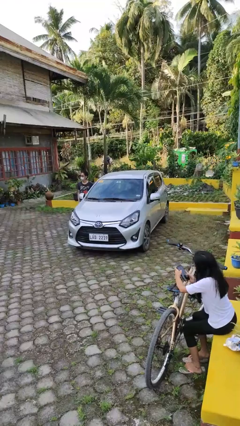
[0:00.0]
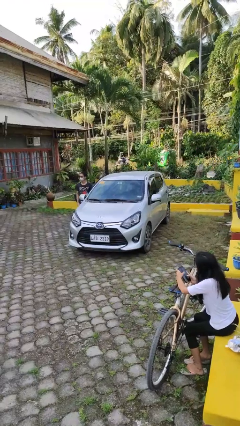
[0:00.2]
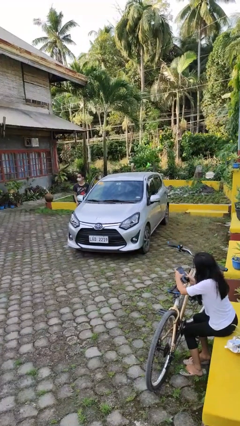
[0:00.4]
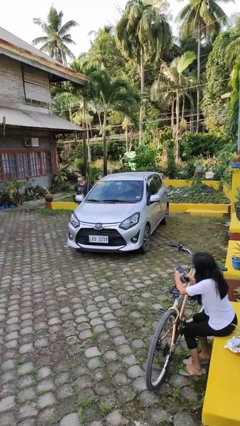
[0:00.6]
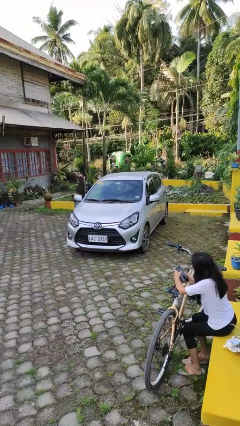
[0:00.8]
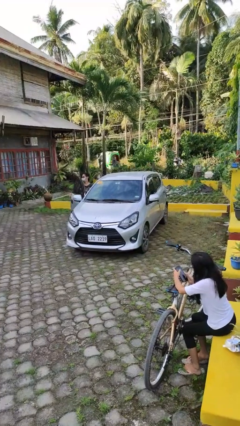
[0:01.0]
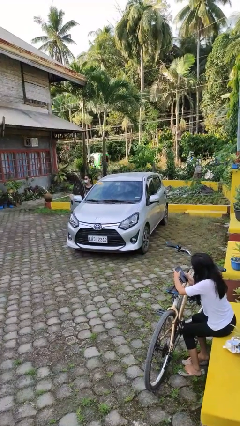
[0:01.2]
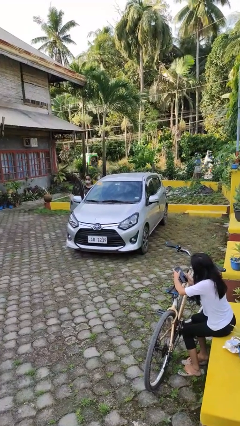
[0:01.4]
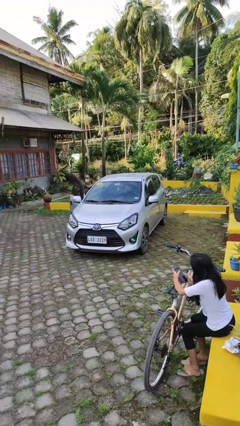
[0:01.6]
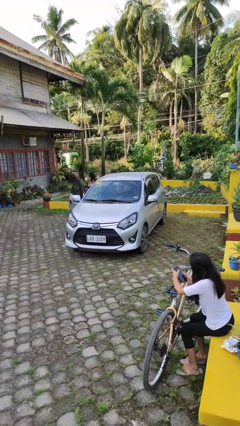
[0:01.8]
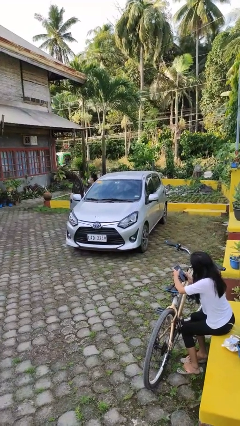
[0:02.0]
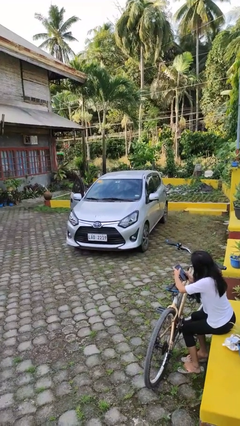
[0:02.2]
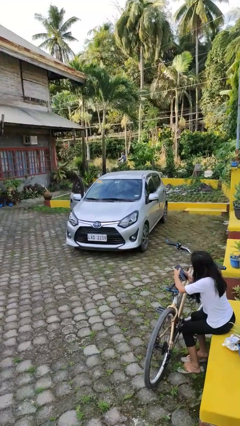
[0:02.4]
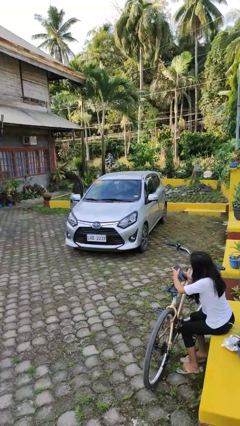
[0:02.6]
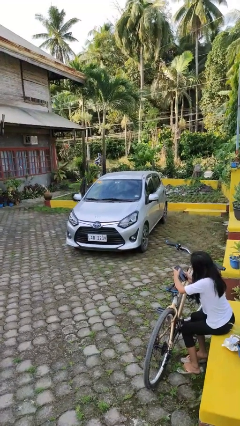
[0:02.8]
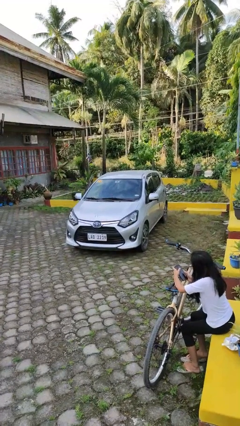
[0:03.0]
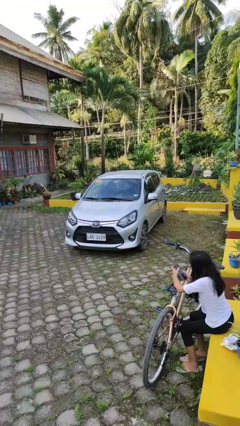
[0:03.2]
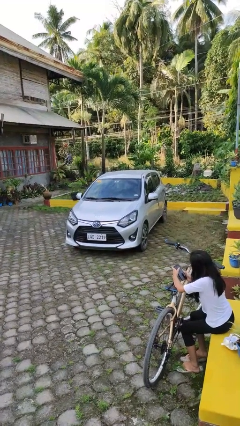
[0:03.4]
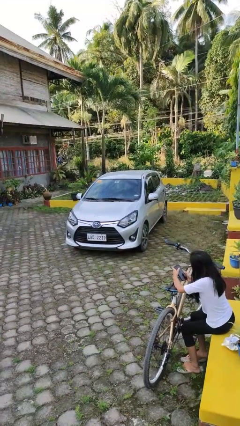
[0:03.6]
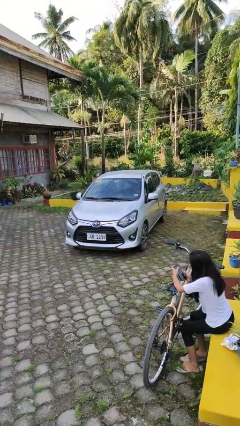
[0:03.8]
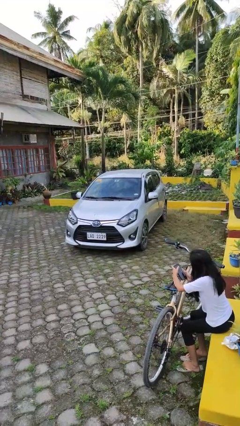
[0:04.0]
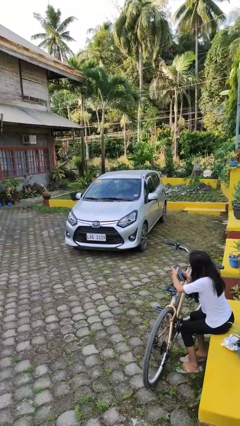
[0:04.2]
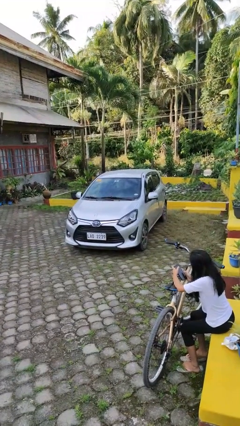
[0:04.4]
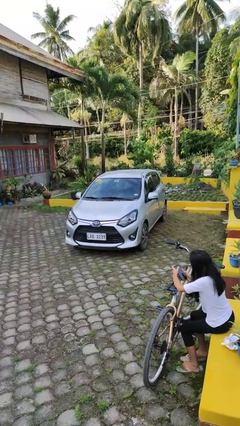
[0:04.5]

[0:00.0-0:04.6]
car picks up person

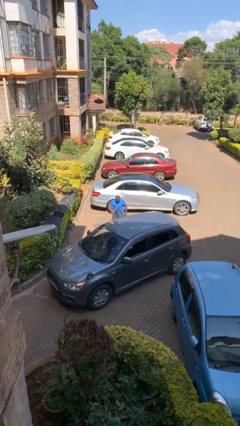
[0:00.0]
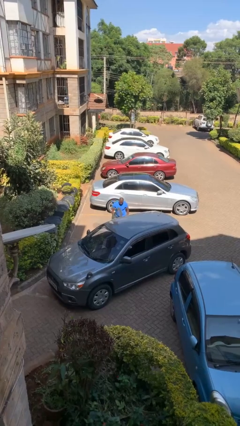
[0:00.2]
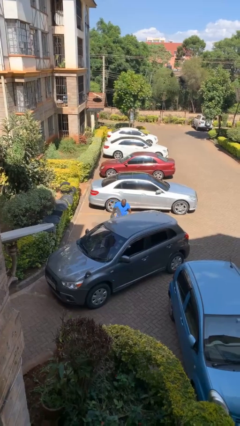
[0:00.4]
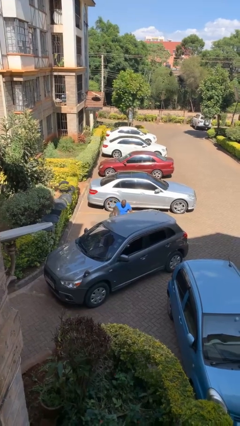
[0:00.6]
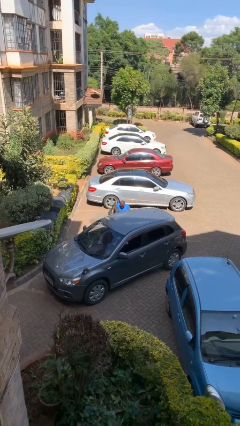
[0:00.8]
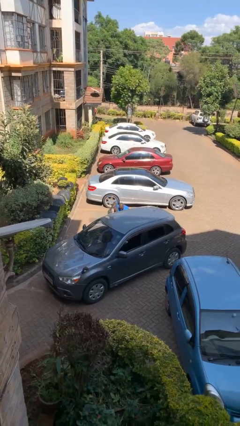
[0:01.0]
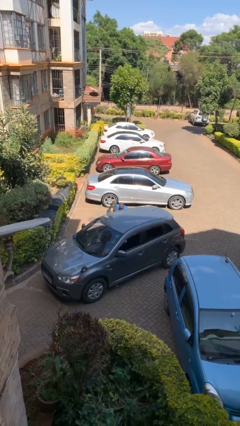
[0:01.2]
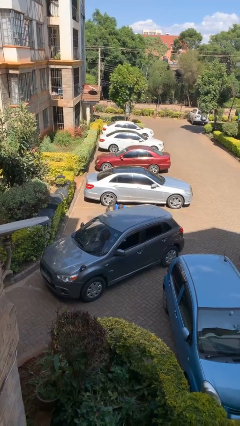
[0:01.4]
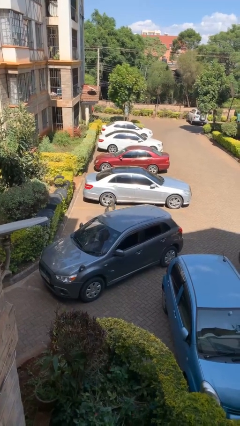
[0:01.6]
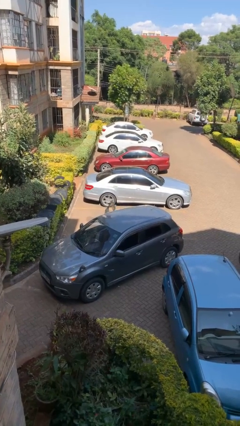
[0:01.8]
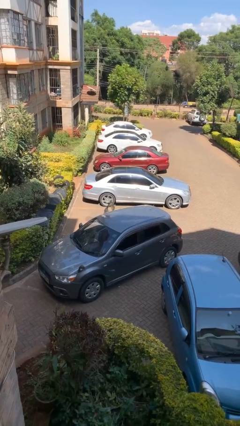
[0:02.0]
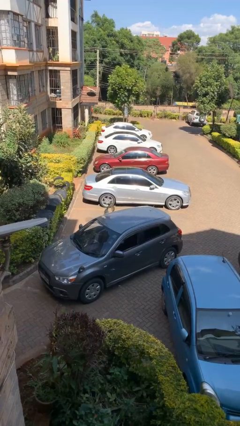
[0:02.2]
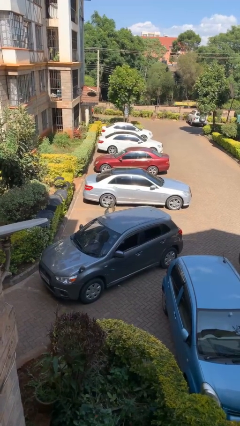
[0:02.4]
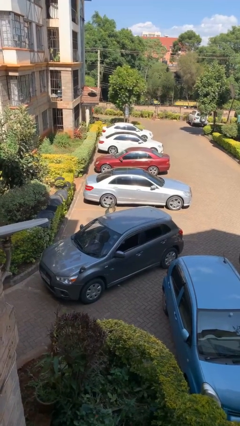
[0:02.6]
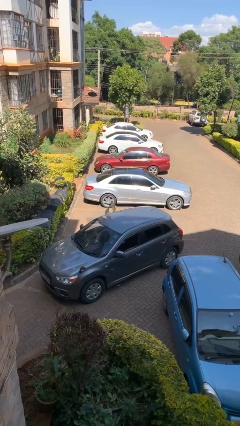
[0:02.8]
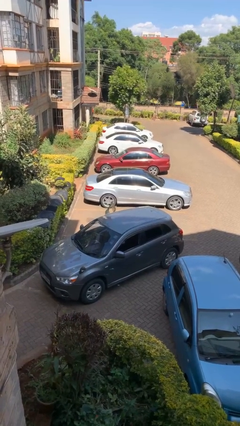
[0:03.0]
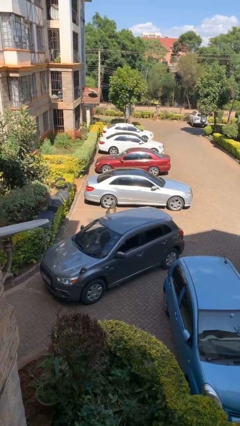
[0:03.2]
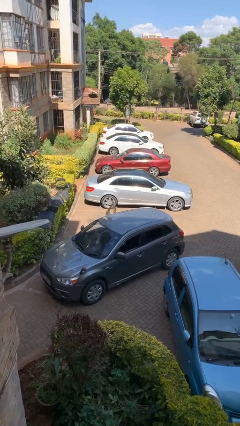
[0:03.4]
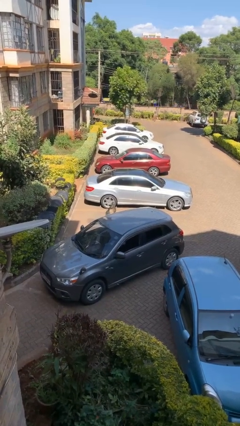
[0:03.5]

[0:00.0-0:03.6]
person enters car

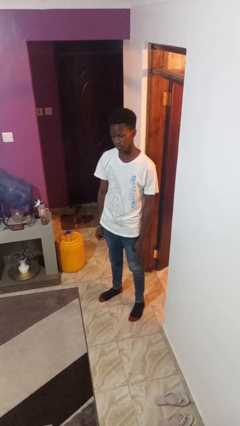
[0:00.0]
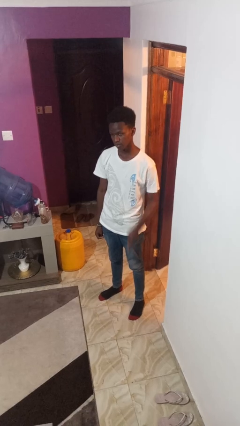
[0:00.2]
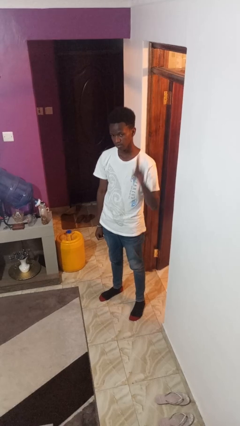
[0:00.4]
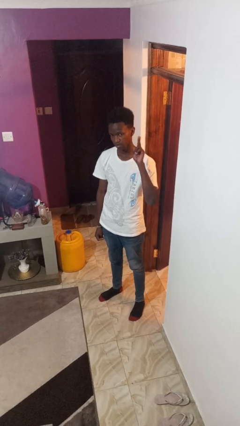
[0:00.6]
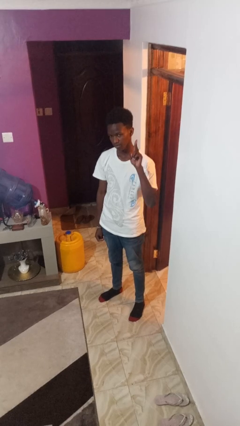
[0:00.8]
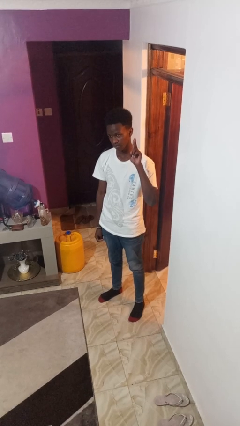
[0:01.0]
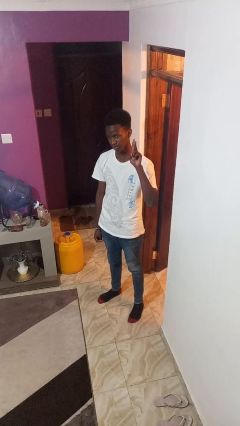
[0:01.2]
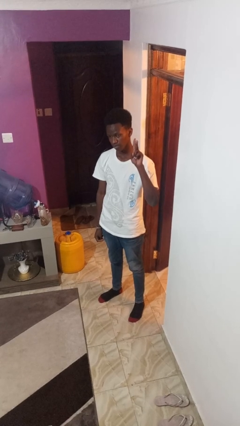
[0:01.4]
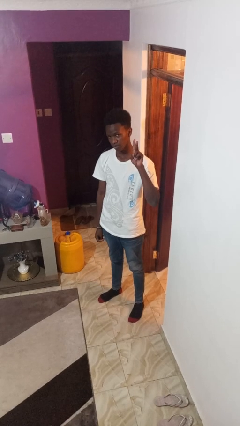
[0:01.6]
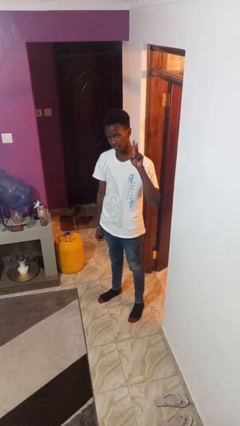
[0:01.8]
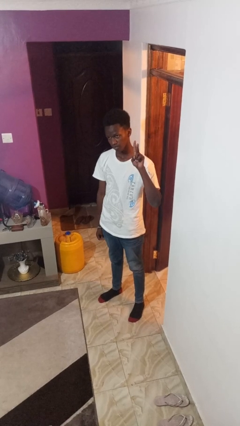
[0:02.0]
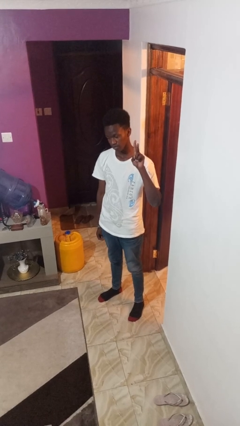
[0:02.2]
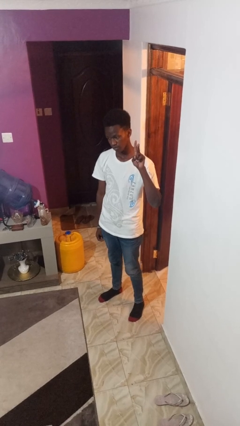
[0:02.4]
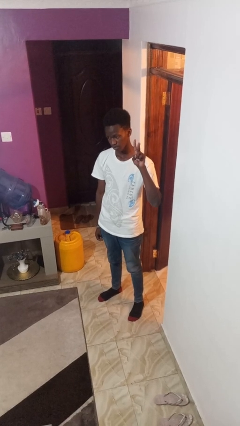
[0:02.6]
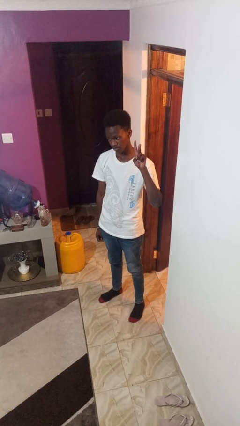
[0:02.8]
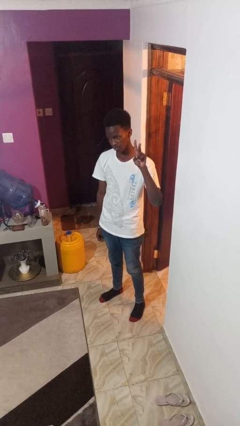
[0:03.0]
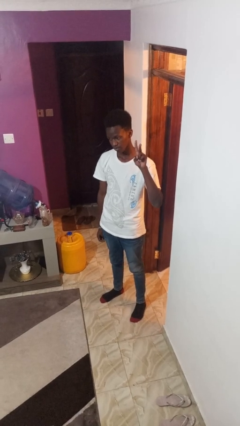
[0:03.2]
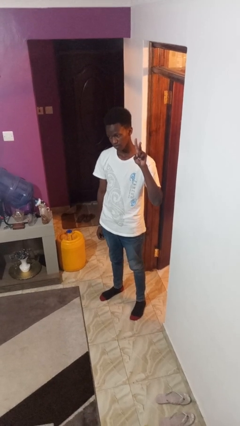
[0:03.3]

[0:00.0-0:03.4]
person gestures peace

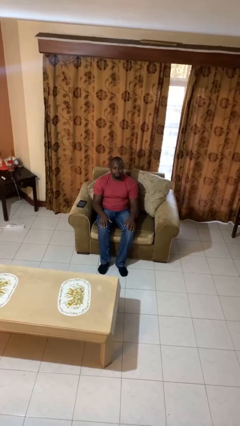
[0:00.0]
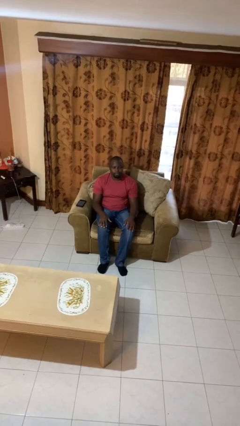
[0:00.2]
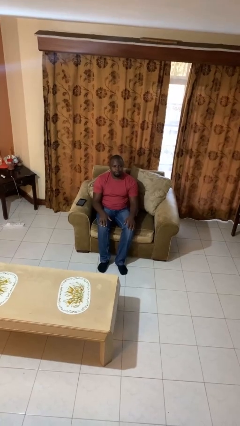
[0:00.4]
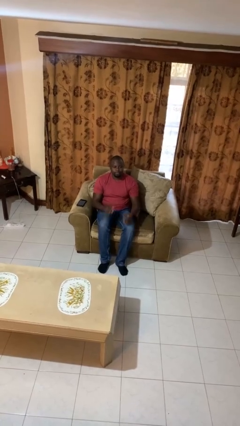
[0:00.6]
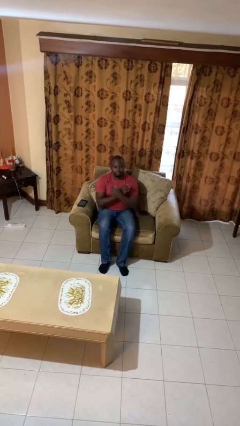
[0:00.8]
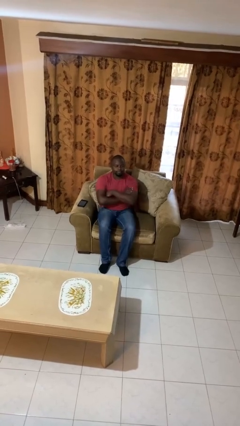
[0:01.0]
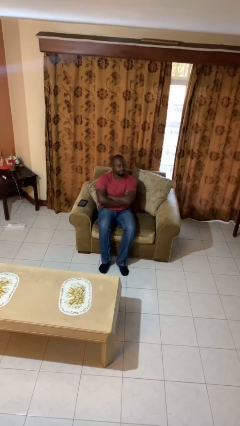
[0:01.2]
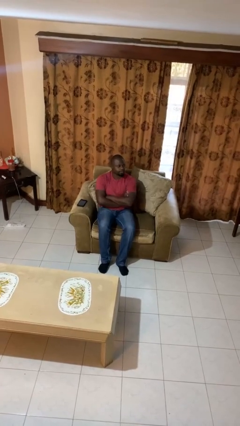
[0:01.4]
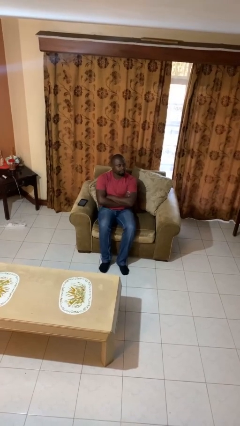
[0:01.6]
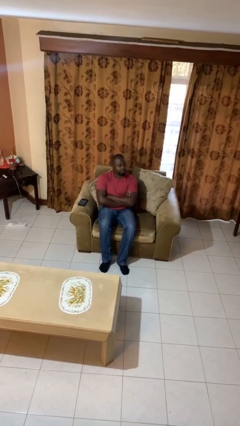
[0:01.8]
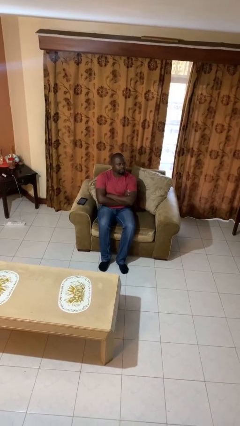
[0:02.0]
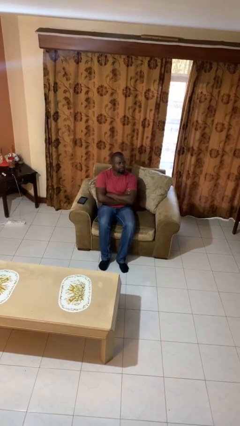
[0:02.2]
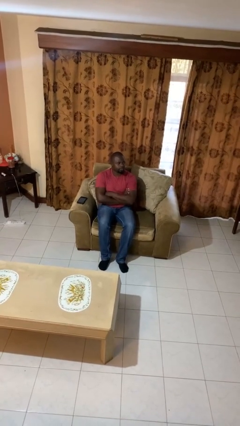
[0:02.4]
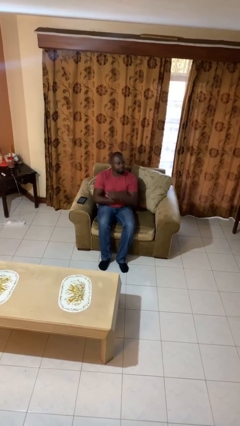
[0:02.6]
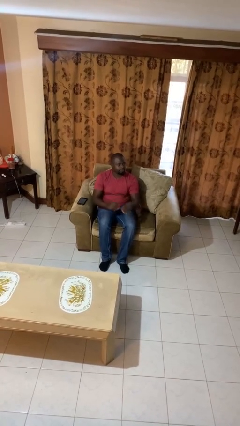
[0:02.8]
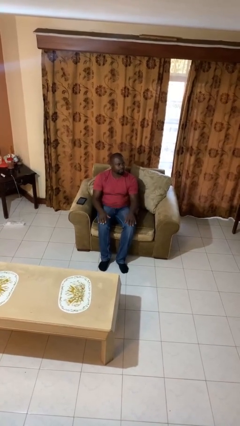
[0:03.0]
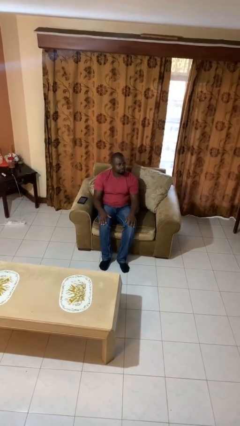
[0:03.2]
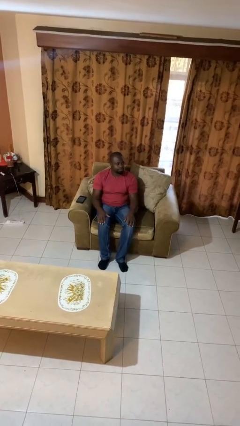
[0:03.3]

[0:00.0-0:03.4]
person crosses arms

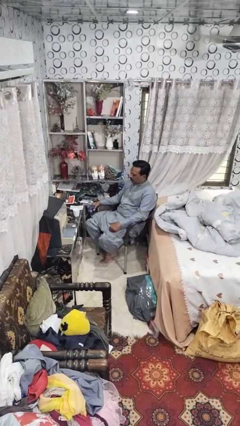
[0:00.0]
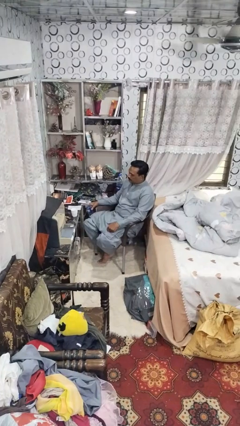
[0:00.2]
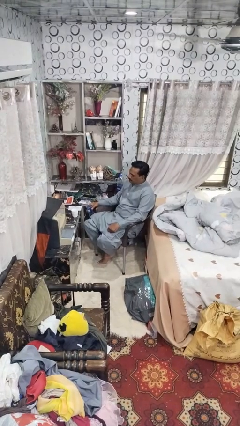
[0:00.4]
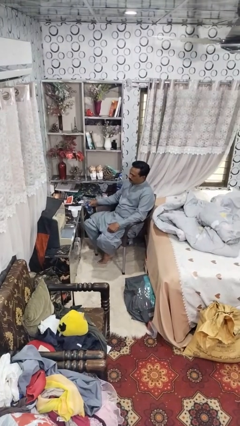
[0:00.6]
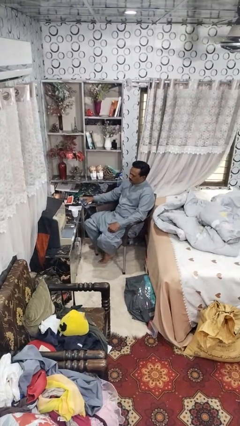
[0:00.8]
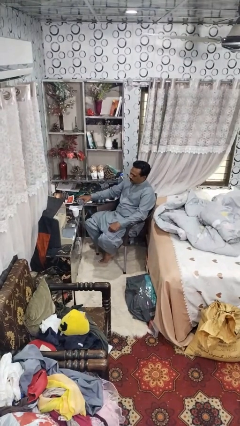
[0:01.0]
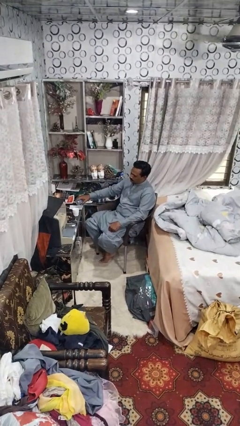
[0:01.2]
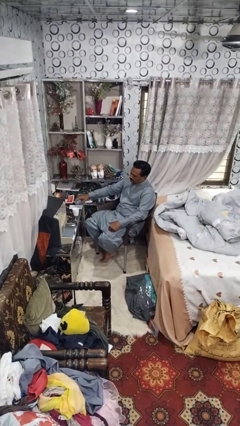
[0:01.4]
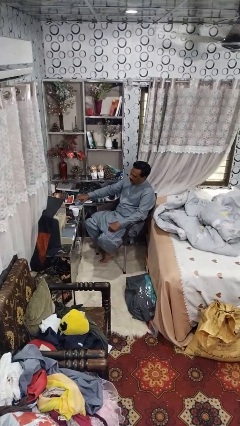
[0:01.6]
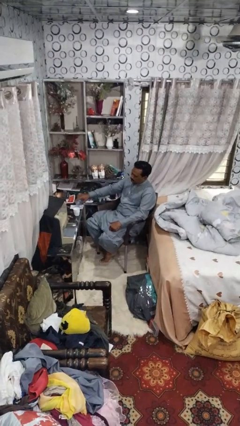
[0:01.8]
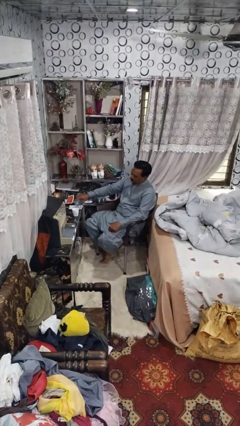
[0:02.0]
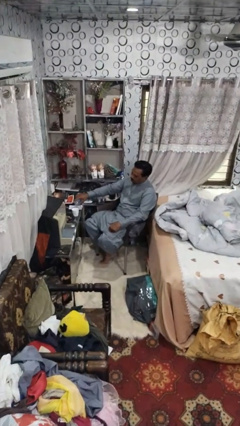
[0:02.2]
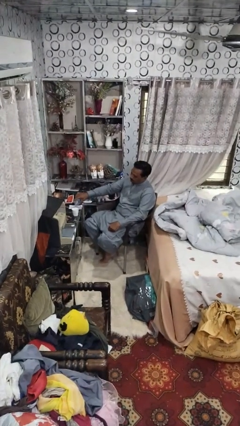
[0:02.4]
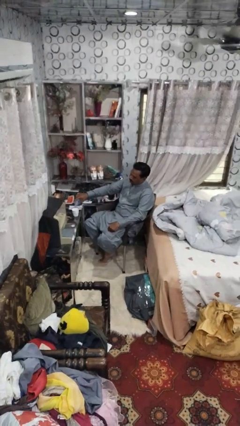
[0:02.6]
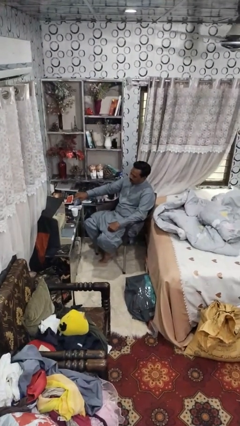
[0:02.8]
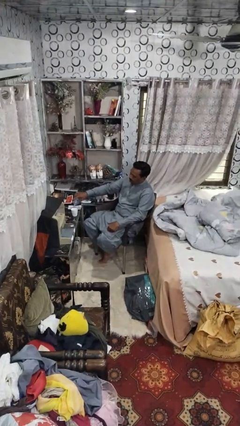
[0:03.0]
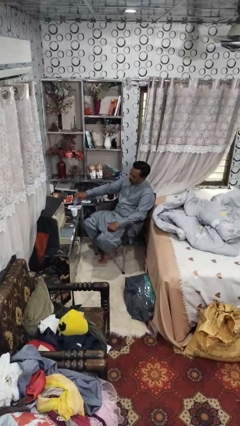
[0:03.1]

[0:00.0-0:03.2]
person pours liquid into cup
